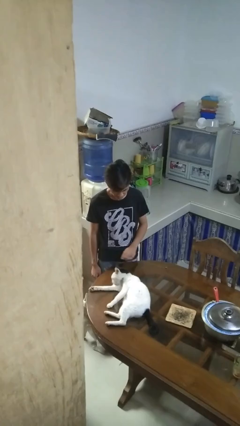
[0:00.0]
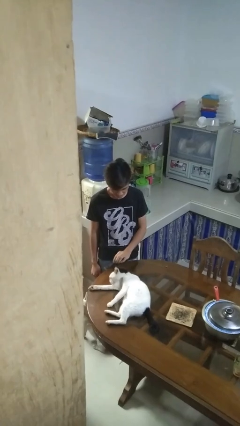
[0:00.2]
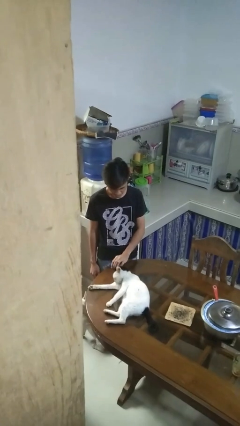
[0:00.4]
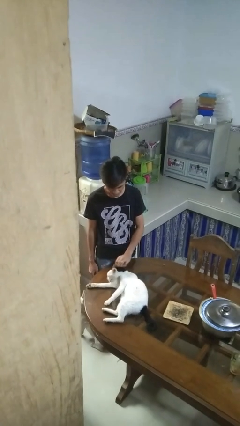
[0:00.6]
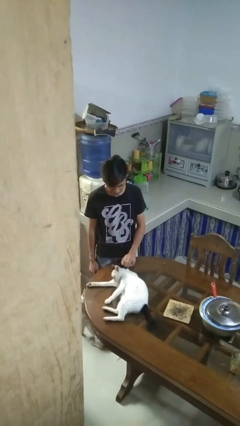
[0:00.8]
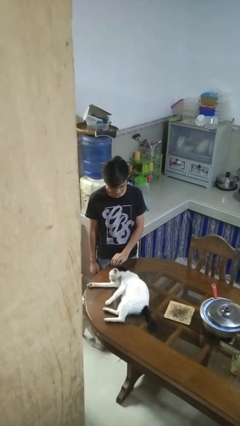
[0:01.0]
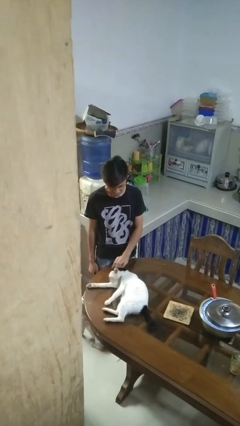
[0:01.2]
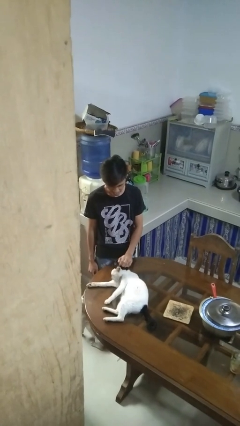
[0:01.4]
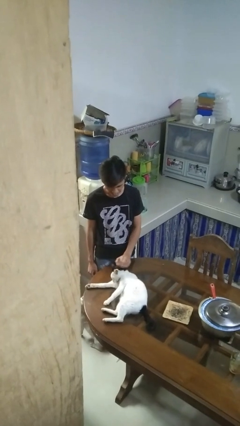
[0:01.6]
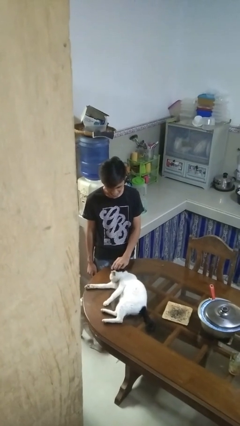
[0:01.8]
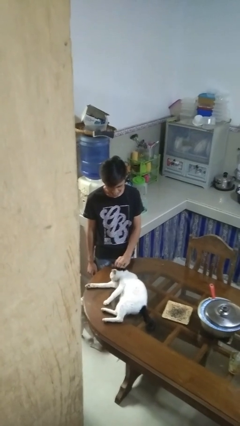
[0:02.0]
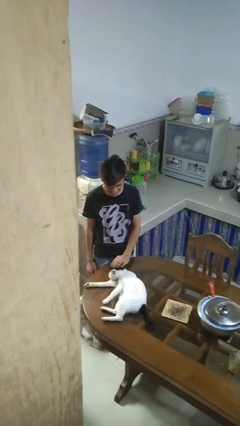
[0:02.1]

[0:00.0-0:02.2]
person pets cat

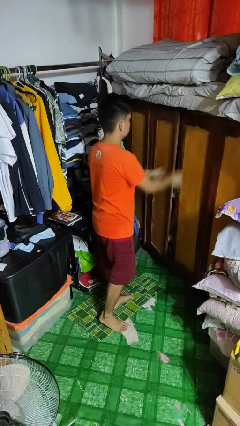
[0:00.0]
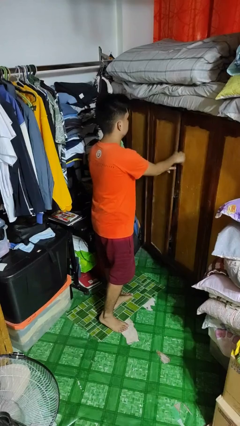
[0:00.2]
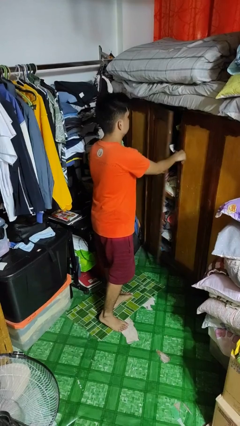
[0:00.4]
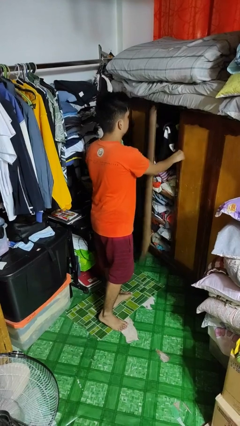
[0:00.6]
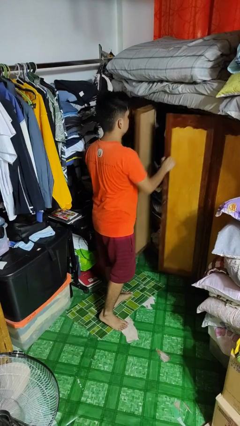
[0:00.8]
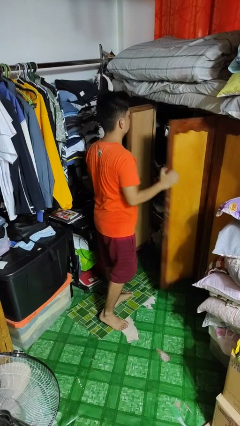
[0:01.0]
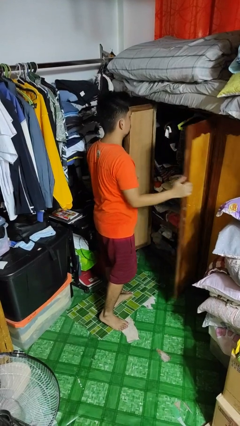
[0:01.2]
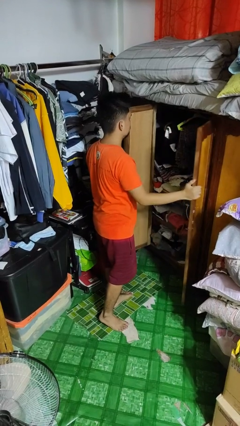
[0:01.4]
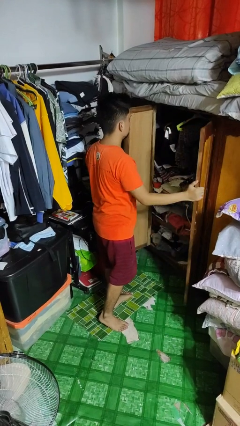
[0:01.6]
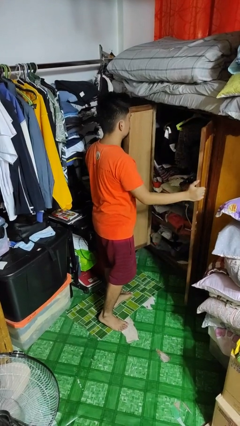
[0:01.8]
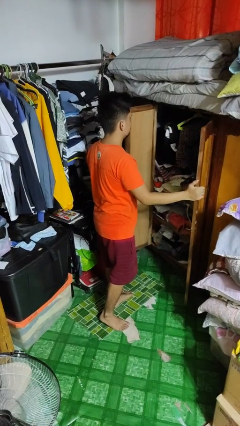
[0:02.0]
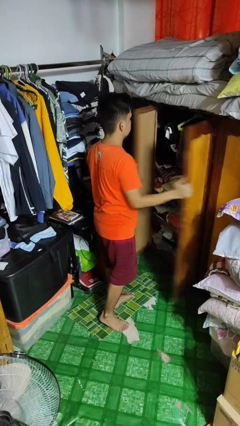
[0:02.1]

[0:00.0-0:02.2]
person opens closet door

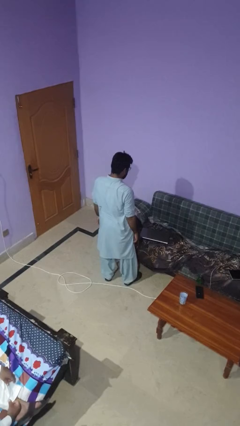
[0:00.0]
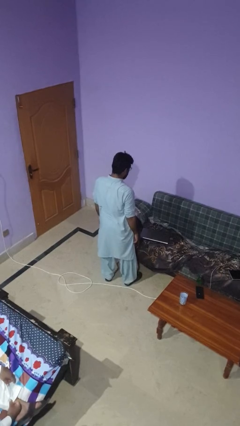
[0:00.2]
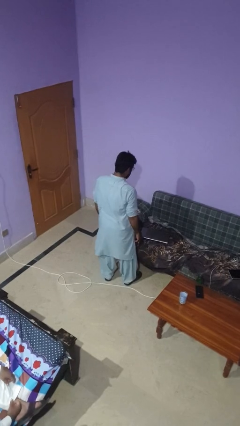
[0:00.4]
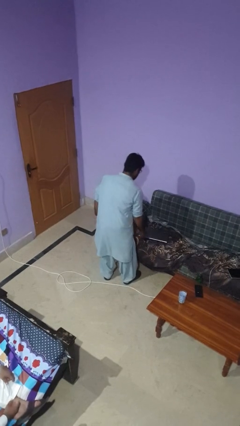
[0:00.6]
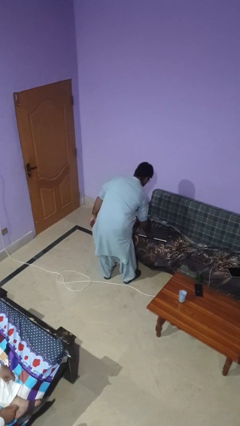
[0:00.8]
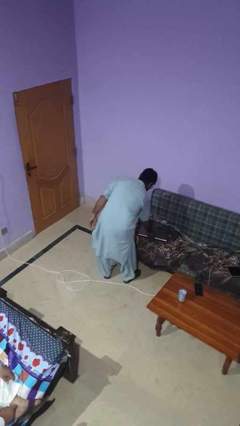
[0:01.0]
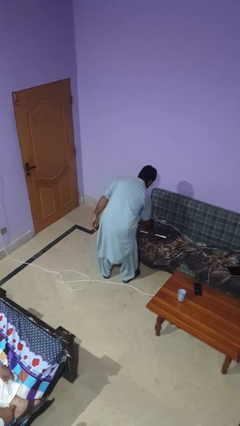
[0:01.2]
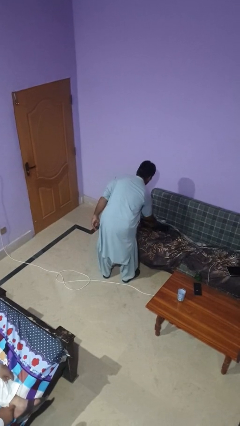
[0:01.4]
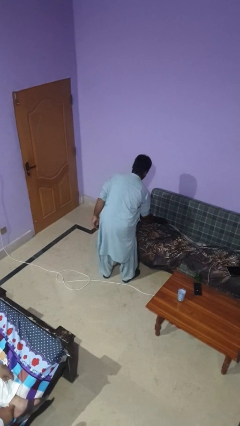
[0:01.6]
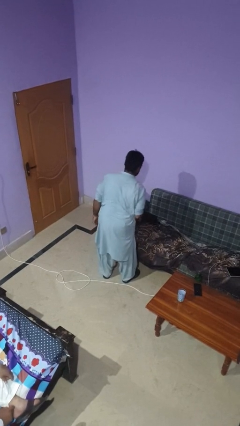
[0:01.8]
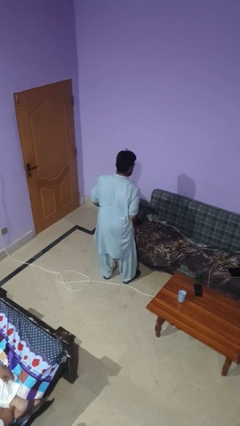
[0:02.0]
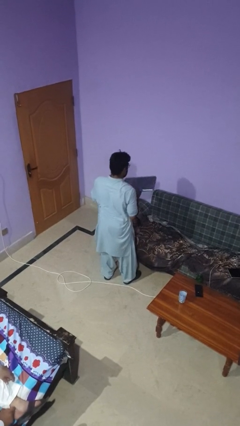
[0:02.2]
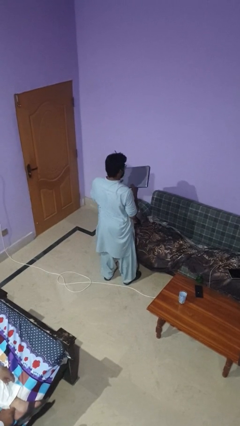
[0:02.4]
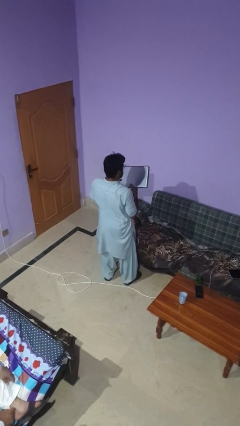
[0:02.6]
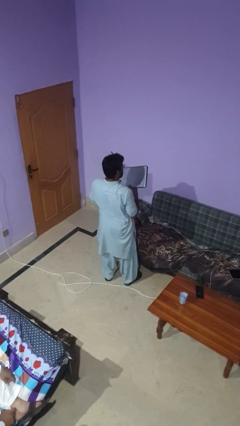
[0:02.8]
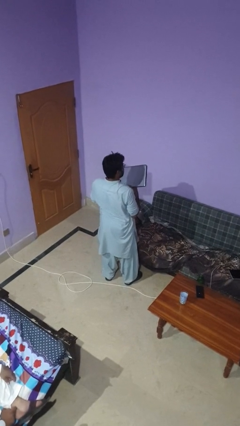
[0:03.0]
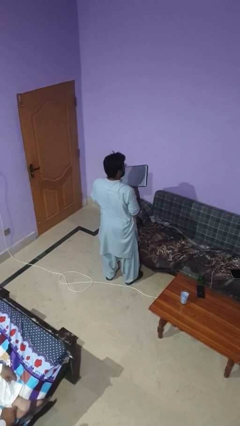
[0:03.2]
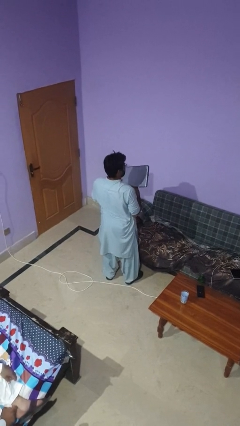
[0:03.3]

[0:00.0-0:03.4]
person picks up object from couch

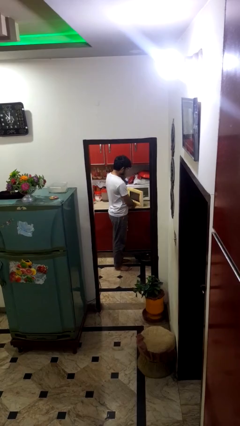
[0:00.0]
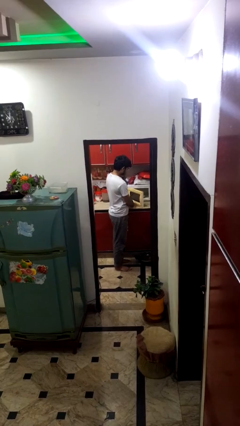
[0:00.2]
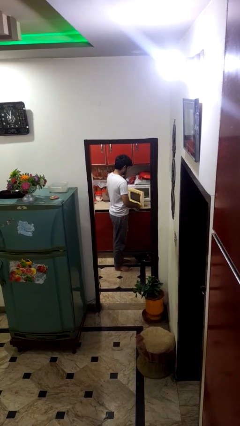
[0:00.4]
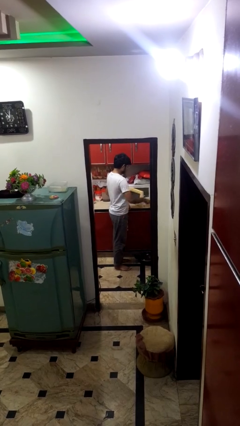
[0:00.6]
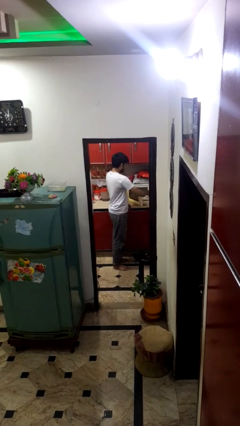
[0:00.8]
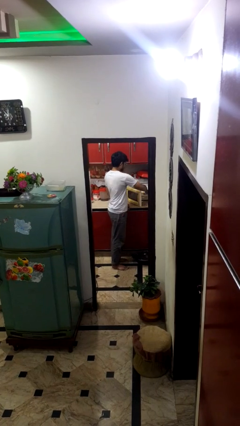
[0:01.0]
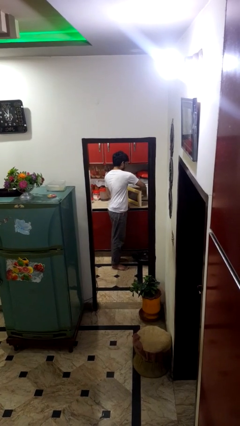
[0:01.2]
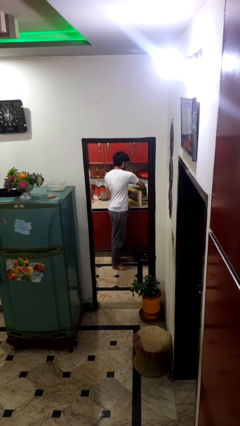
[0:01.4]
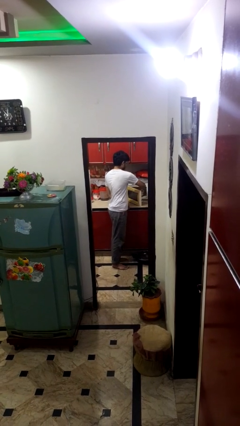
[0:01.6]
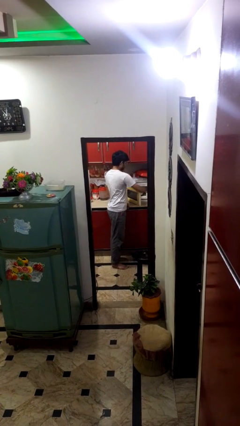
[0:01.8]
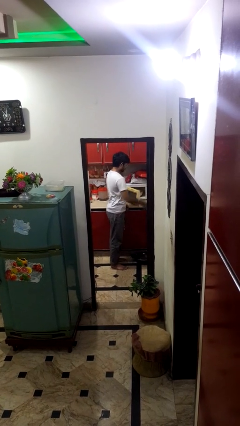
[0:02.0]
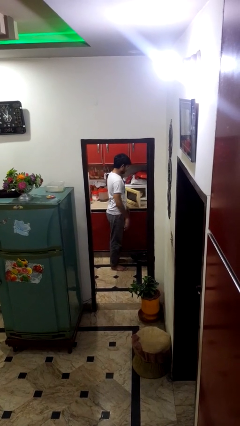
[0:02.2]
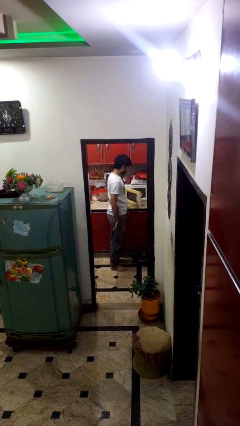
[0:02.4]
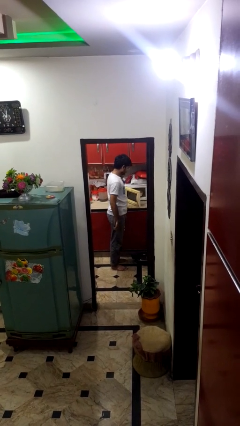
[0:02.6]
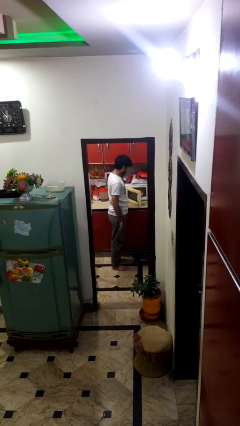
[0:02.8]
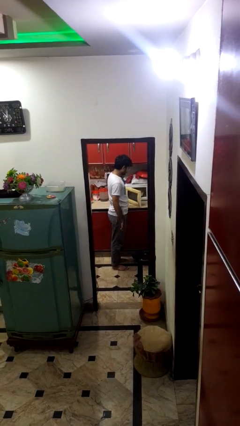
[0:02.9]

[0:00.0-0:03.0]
person puts object into microwave

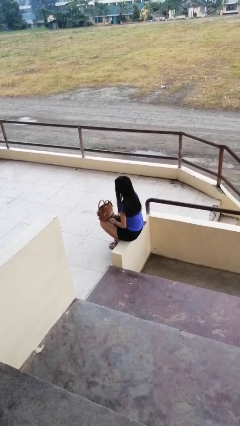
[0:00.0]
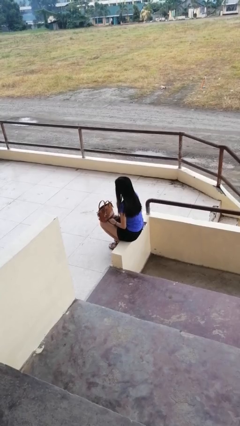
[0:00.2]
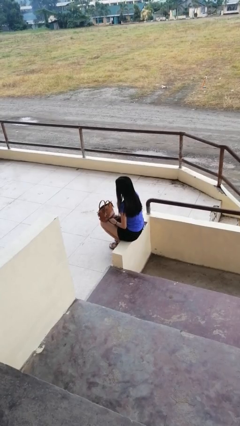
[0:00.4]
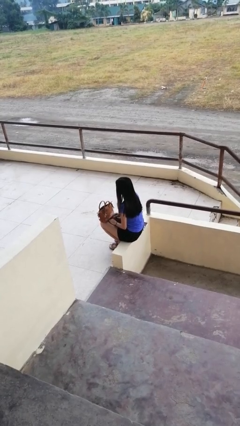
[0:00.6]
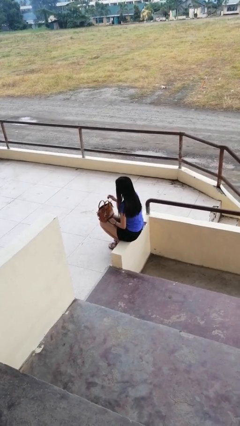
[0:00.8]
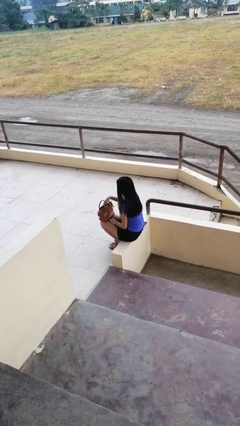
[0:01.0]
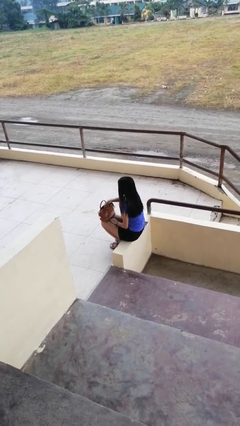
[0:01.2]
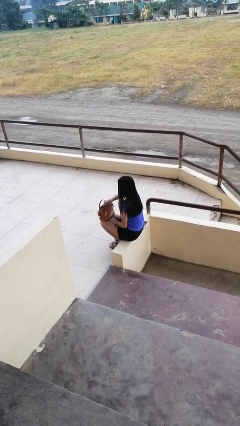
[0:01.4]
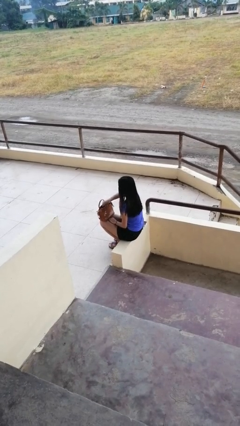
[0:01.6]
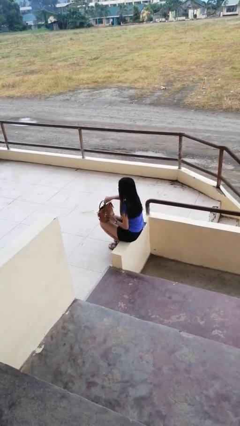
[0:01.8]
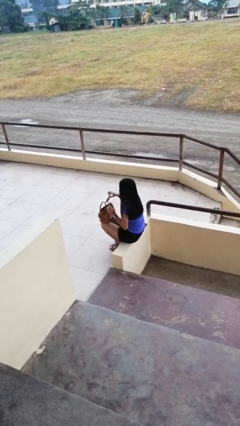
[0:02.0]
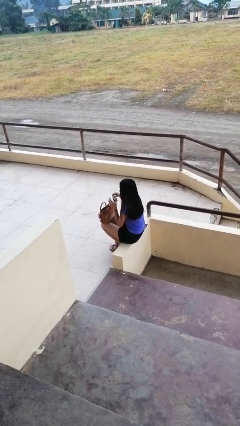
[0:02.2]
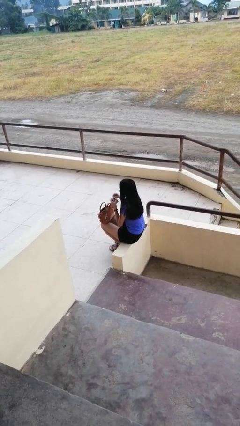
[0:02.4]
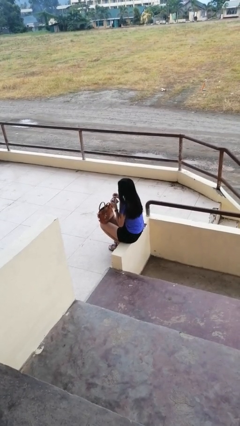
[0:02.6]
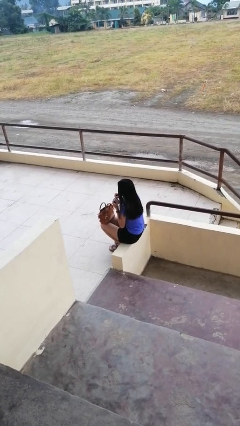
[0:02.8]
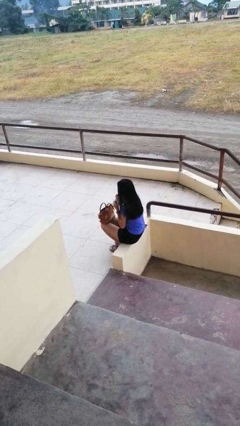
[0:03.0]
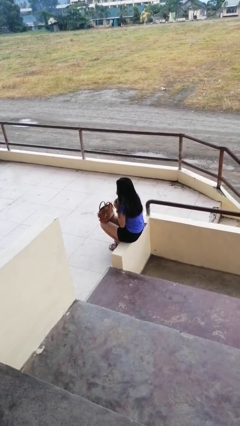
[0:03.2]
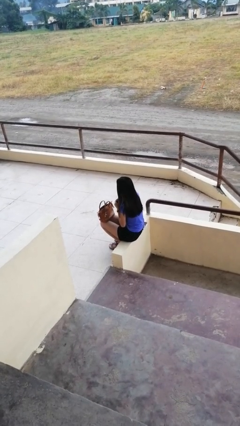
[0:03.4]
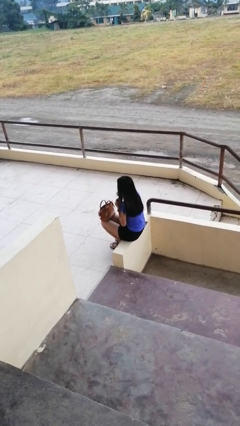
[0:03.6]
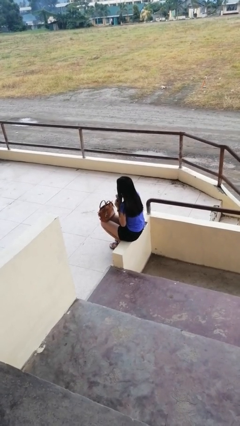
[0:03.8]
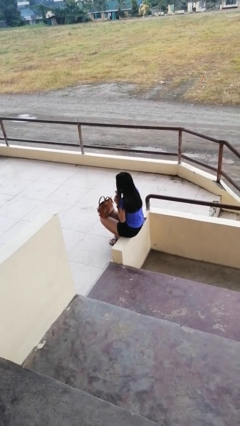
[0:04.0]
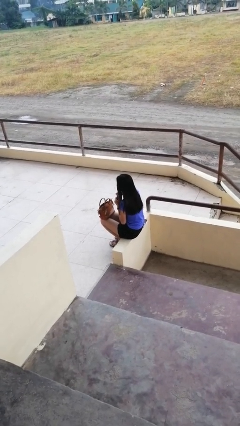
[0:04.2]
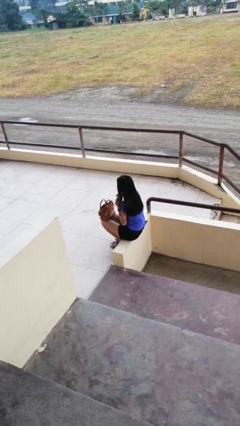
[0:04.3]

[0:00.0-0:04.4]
person eats snack from bag

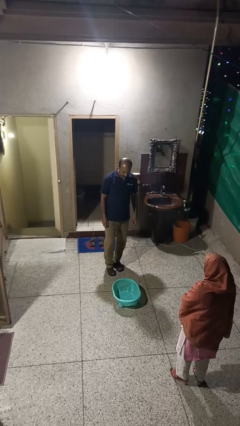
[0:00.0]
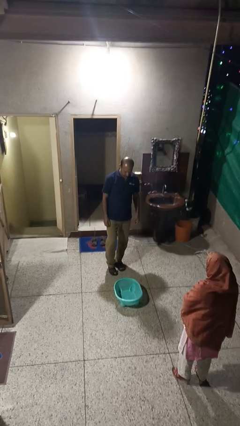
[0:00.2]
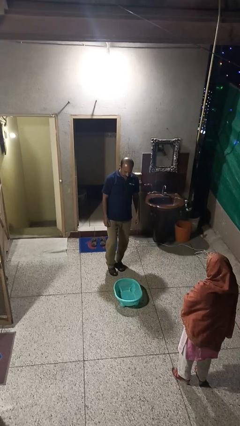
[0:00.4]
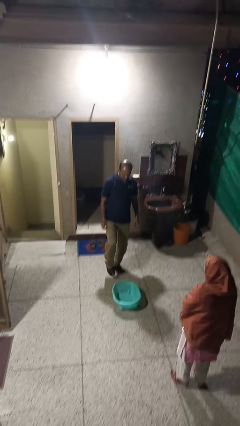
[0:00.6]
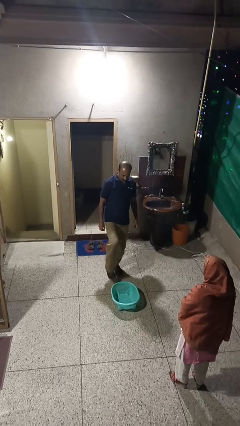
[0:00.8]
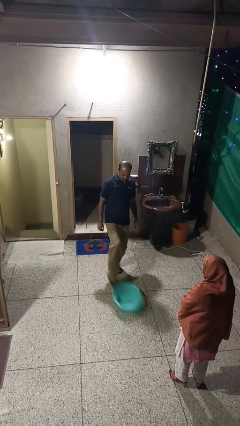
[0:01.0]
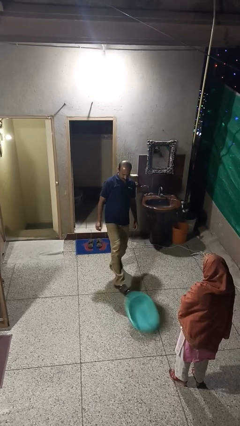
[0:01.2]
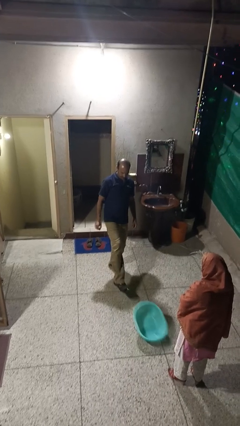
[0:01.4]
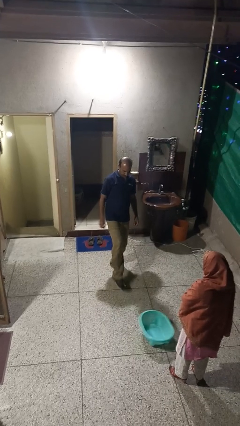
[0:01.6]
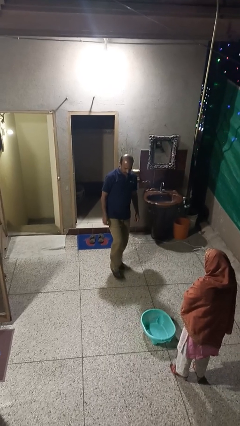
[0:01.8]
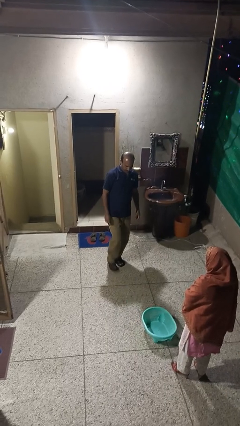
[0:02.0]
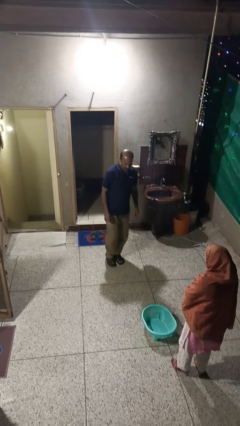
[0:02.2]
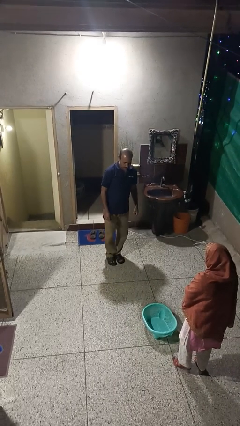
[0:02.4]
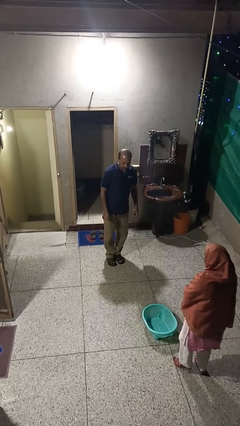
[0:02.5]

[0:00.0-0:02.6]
person kicks object to person
